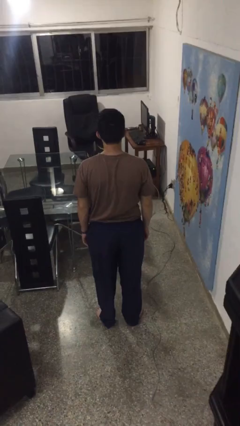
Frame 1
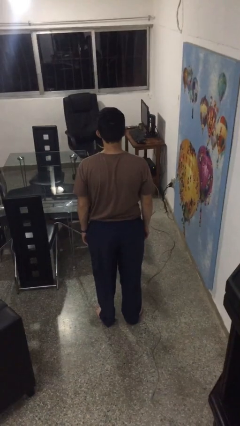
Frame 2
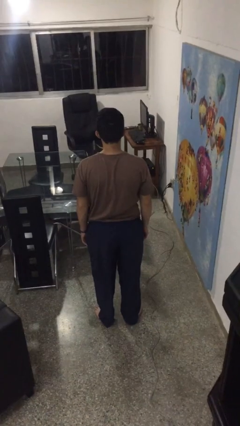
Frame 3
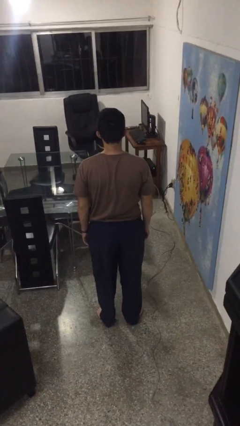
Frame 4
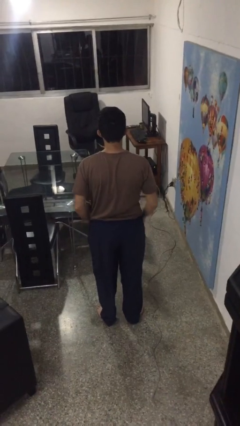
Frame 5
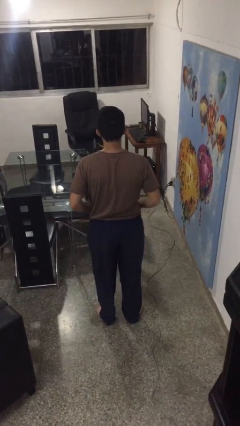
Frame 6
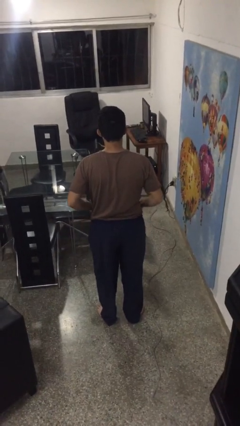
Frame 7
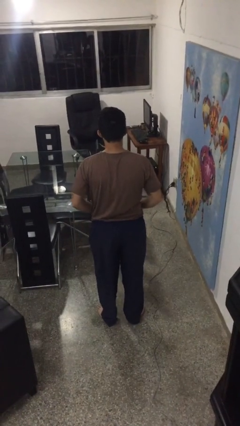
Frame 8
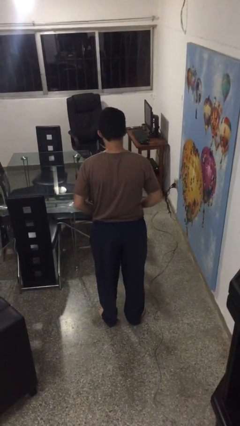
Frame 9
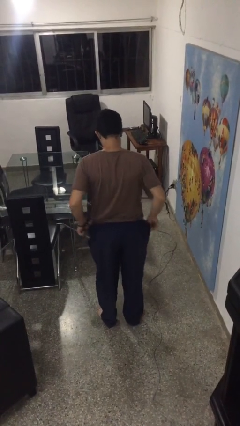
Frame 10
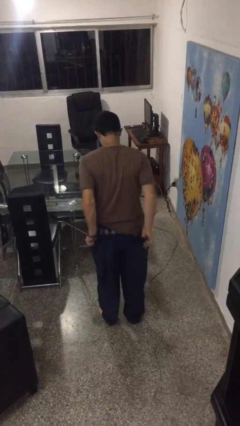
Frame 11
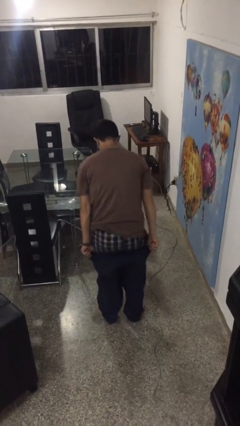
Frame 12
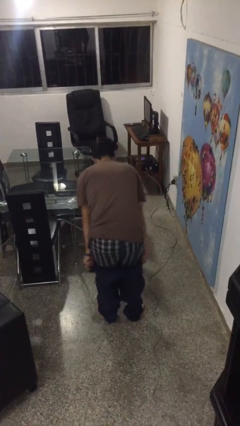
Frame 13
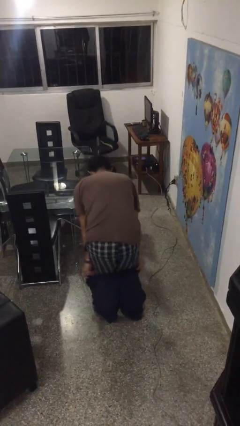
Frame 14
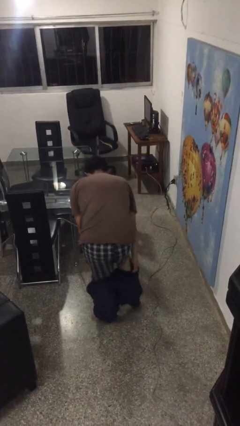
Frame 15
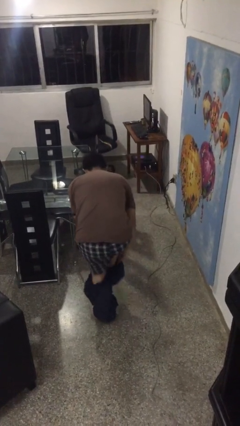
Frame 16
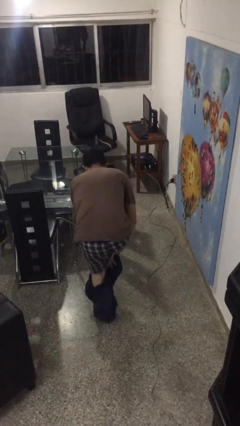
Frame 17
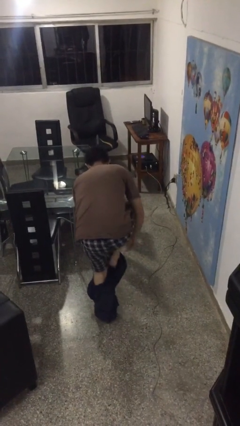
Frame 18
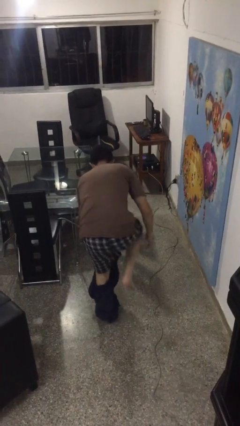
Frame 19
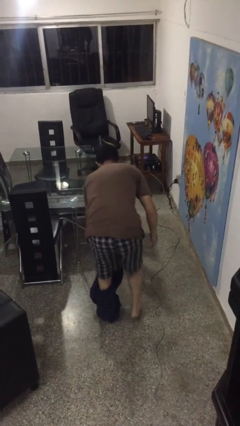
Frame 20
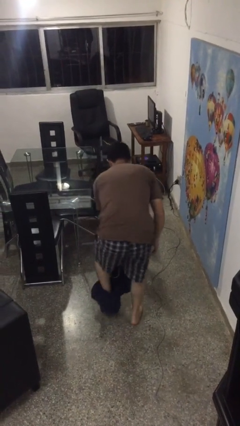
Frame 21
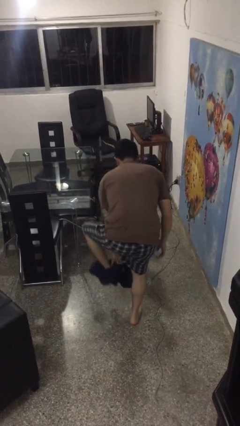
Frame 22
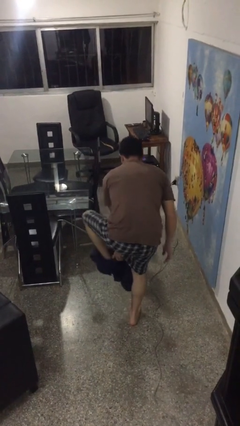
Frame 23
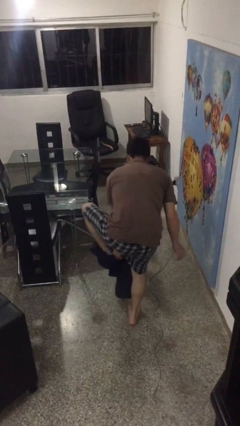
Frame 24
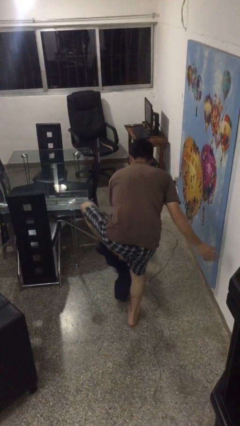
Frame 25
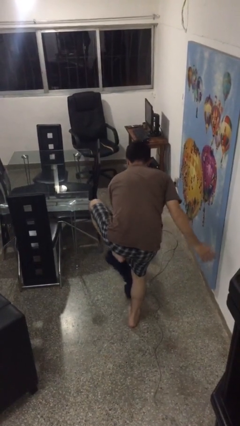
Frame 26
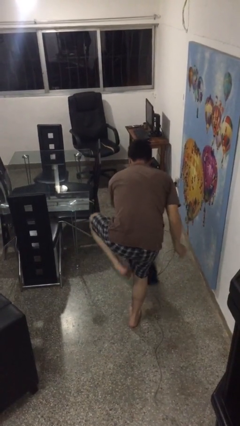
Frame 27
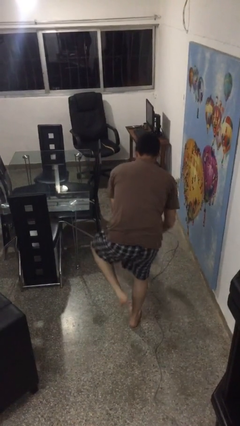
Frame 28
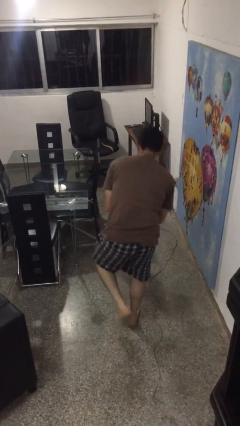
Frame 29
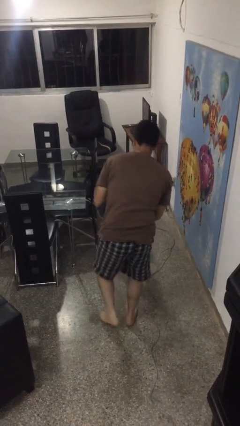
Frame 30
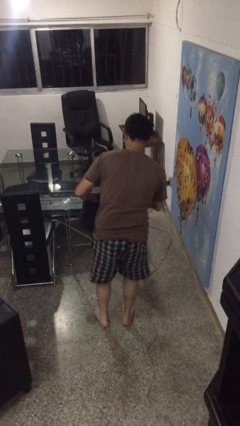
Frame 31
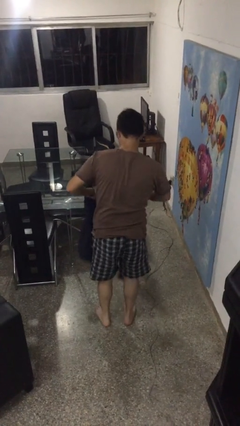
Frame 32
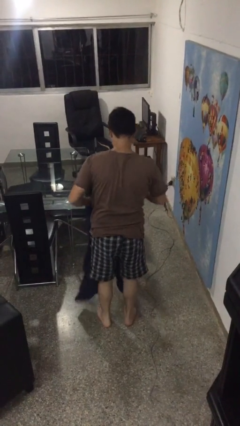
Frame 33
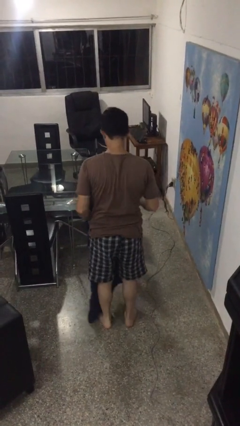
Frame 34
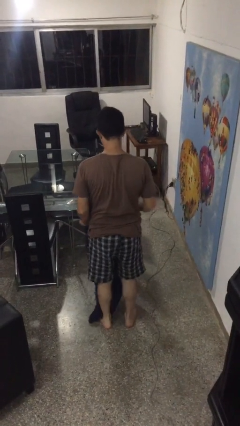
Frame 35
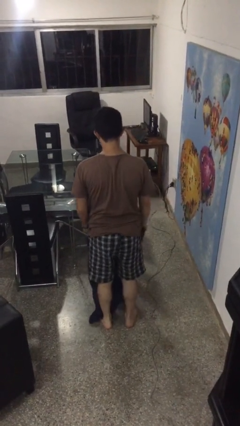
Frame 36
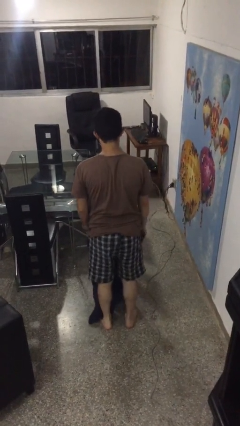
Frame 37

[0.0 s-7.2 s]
person takes off pants

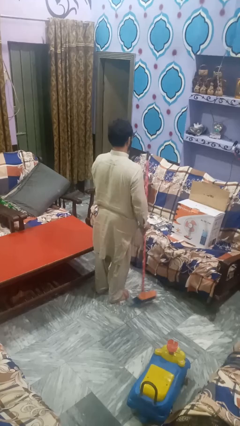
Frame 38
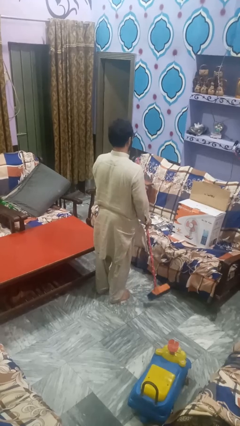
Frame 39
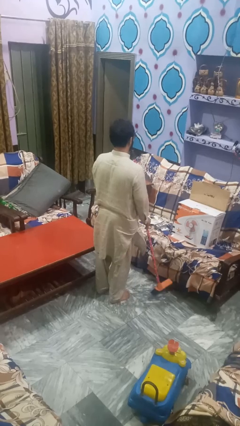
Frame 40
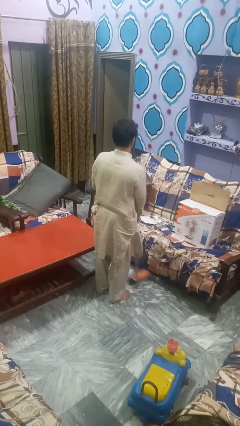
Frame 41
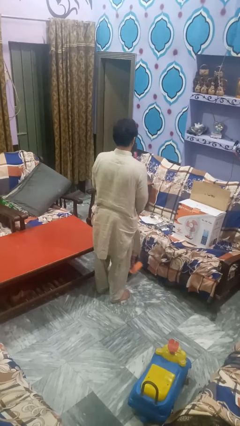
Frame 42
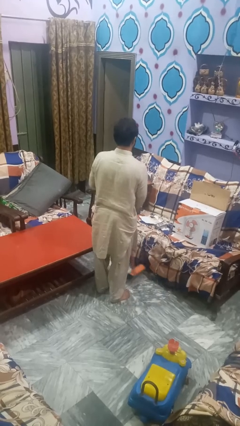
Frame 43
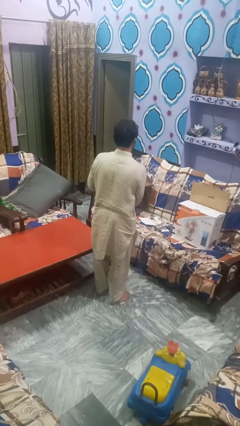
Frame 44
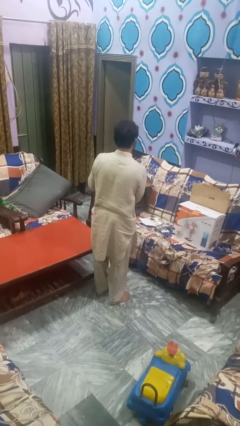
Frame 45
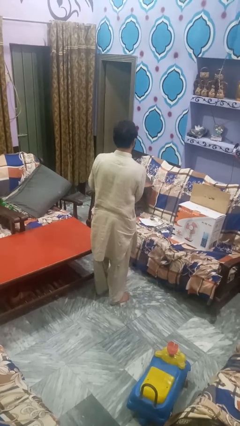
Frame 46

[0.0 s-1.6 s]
person mops

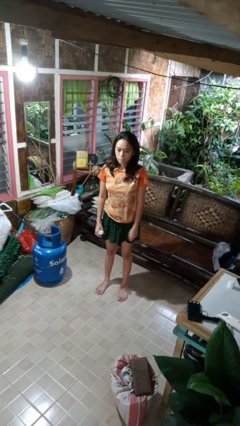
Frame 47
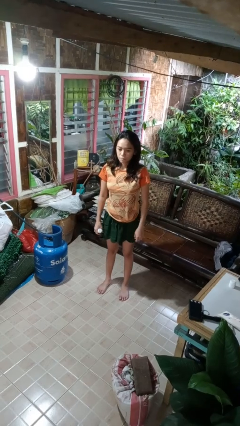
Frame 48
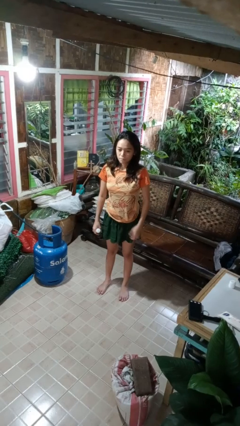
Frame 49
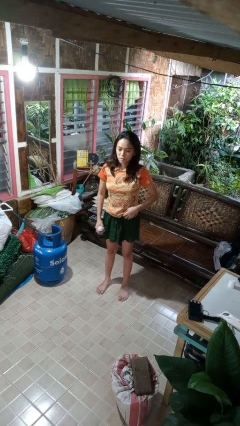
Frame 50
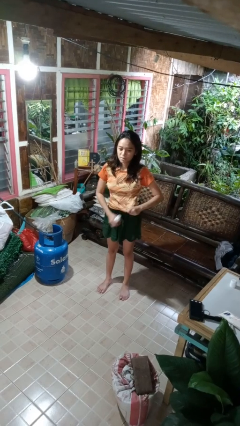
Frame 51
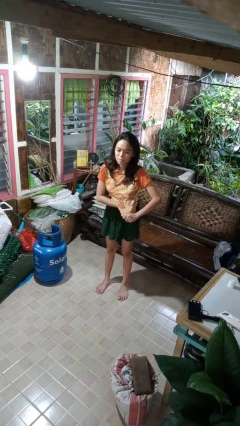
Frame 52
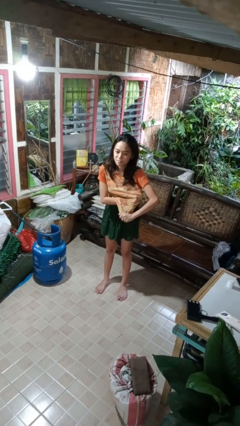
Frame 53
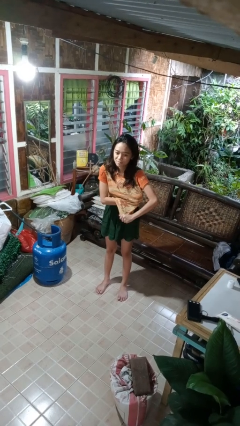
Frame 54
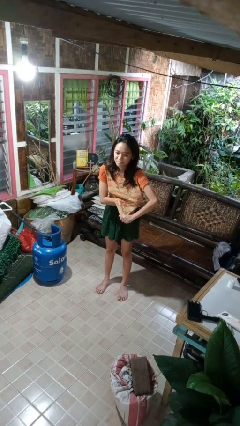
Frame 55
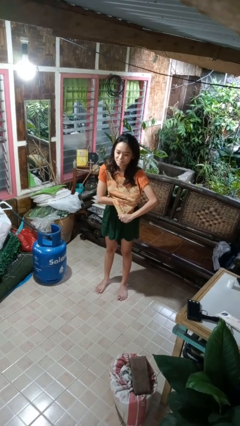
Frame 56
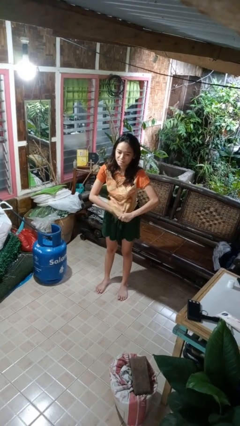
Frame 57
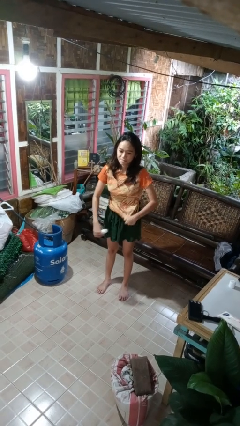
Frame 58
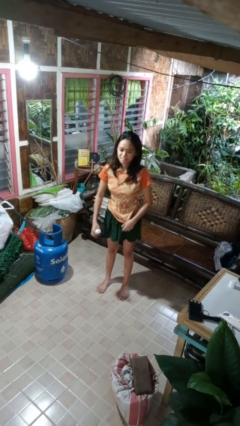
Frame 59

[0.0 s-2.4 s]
person applies deodorant

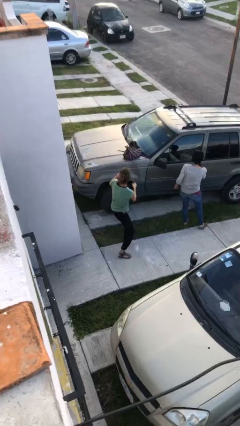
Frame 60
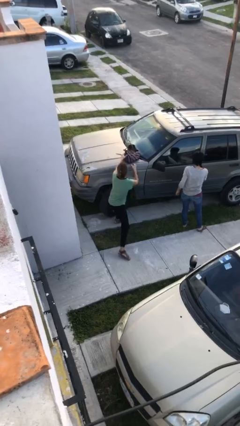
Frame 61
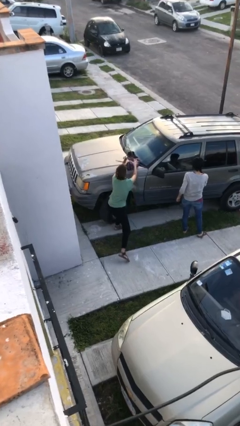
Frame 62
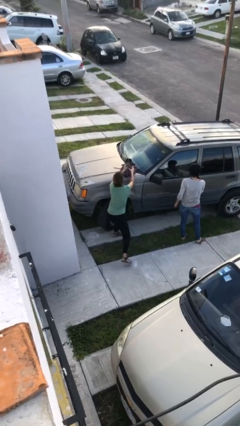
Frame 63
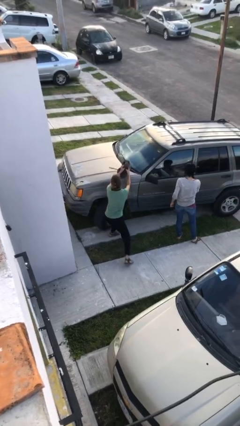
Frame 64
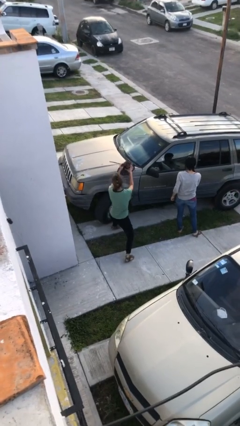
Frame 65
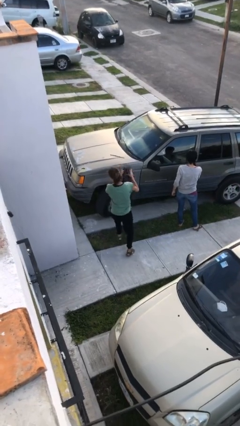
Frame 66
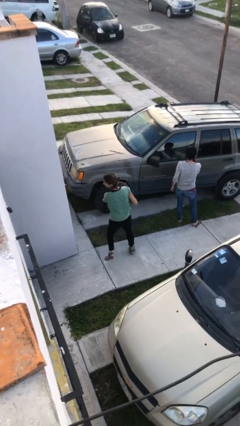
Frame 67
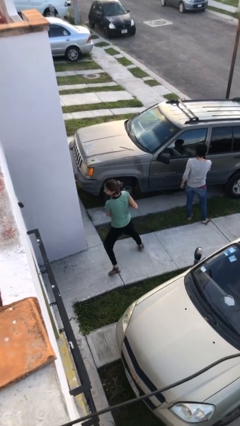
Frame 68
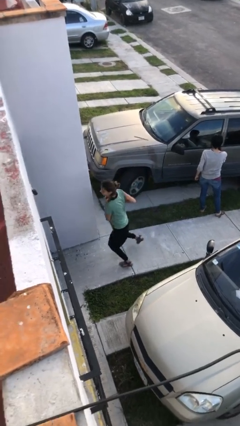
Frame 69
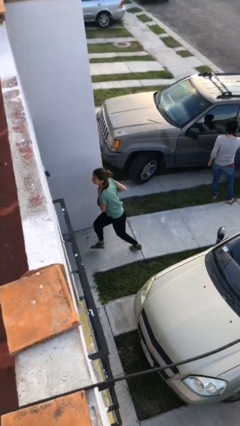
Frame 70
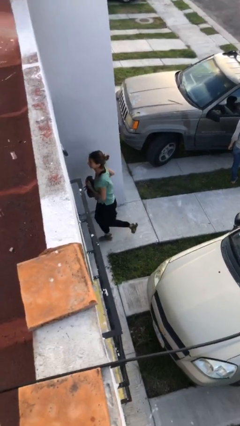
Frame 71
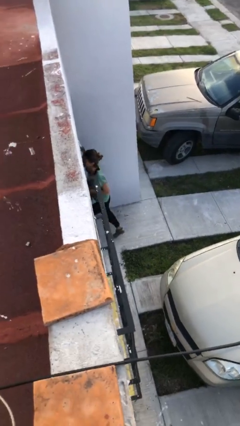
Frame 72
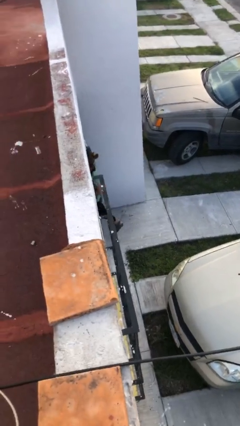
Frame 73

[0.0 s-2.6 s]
person steals object from person

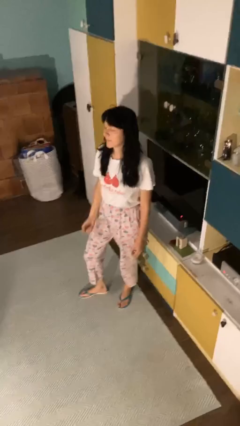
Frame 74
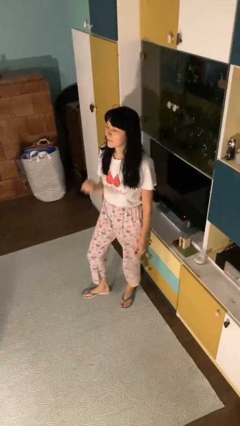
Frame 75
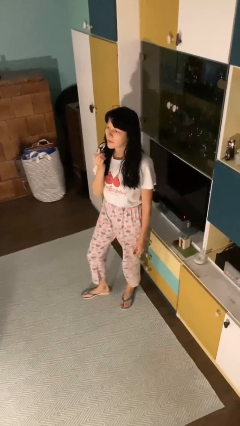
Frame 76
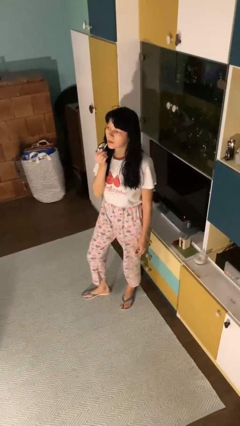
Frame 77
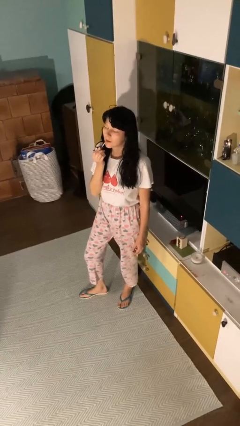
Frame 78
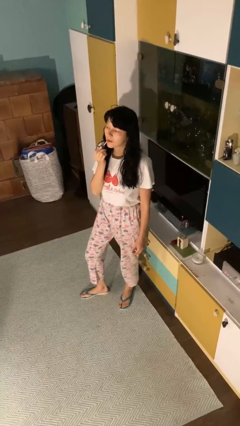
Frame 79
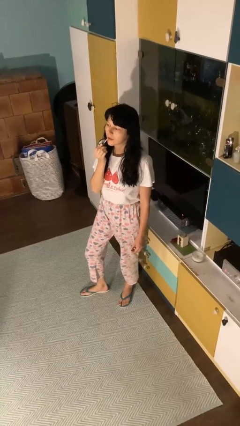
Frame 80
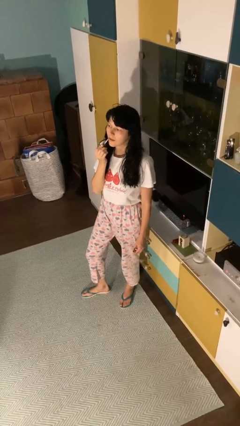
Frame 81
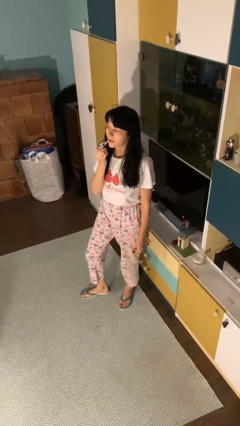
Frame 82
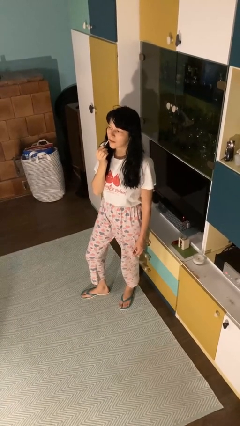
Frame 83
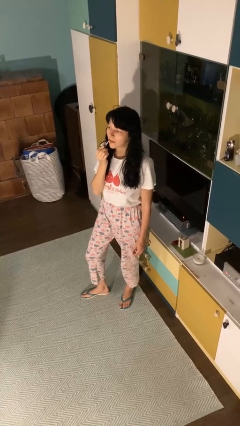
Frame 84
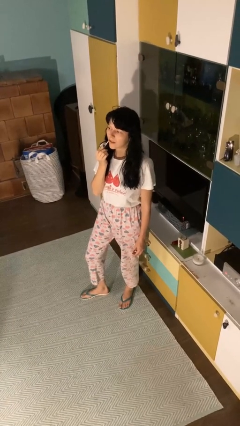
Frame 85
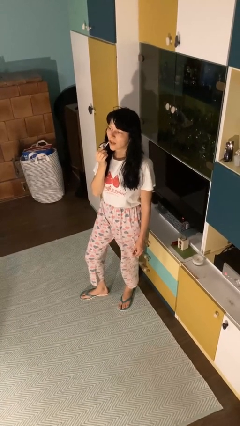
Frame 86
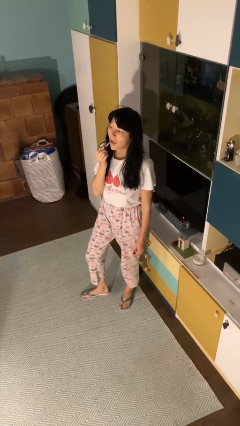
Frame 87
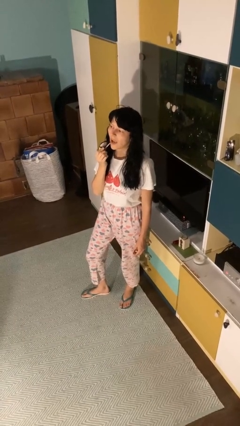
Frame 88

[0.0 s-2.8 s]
person applies lip makeup

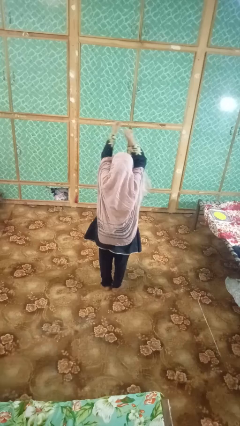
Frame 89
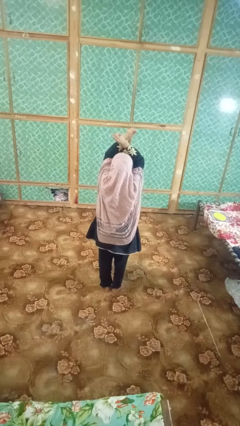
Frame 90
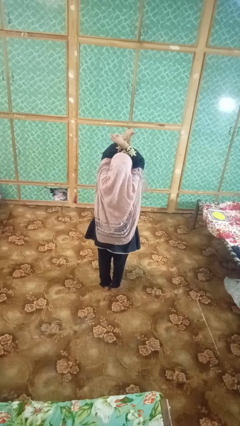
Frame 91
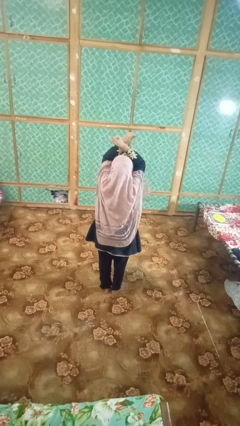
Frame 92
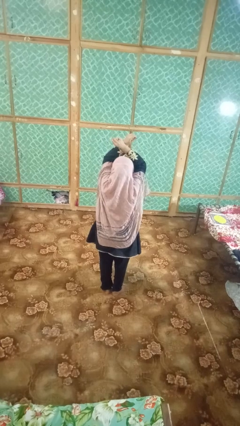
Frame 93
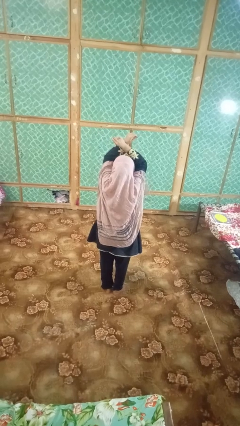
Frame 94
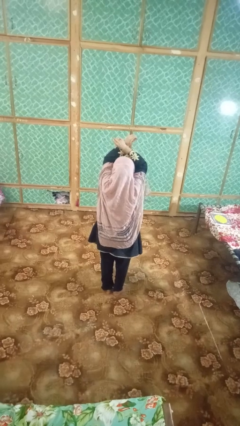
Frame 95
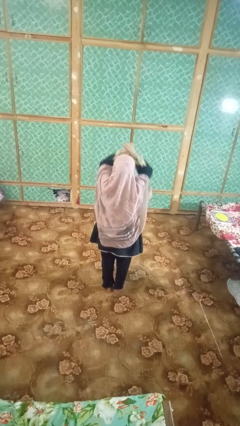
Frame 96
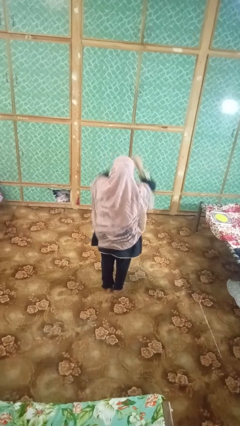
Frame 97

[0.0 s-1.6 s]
person gestures arms x
